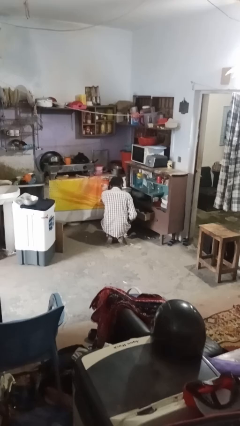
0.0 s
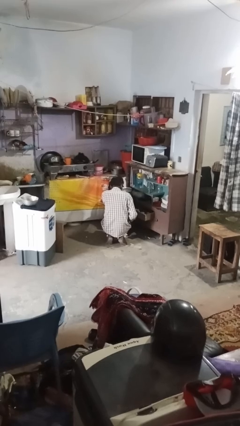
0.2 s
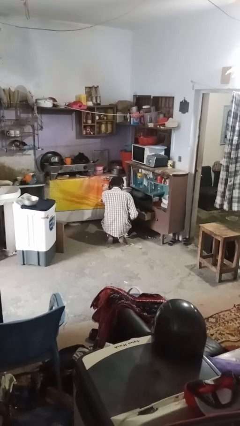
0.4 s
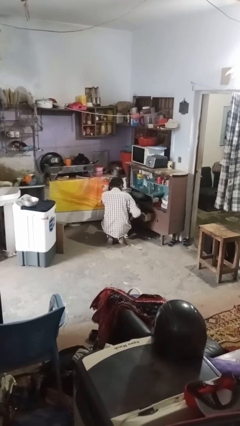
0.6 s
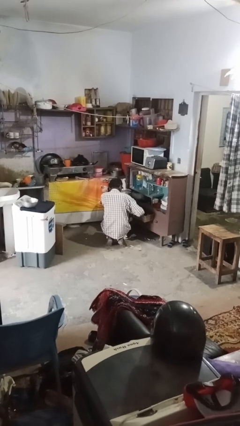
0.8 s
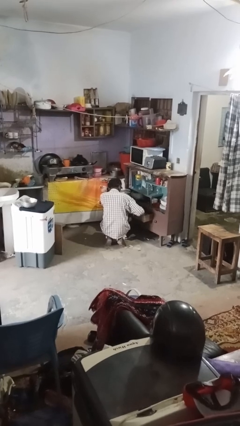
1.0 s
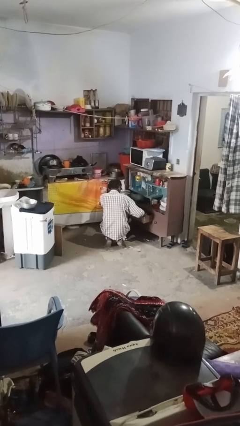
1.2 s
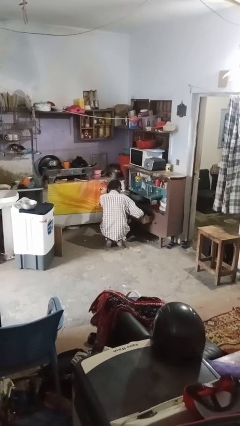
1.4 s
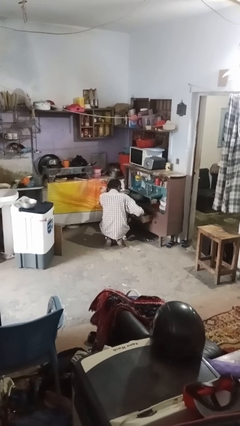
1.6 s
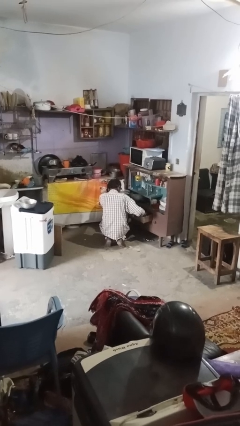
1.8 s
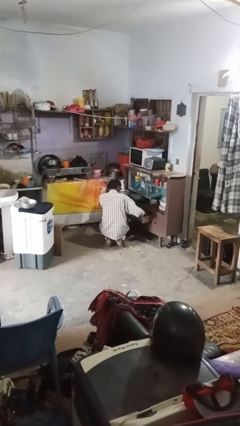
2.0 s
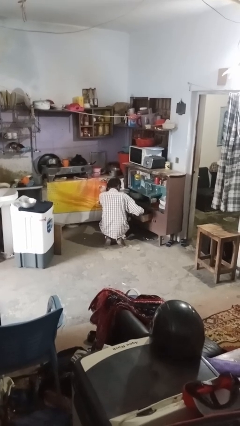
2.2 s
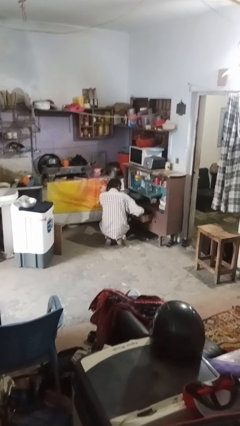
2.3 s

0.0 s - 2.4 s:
person searches in kitchen drawer

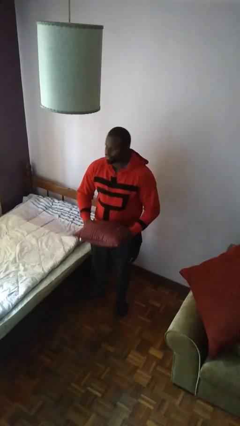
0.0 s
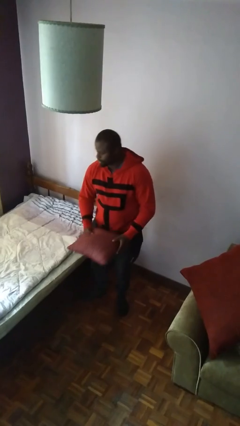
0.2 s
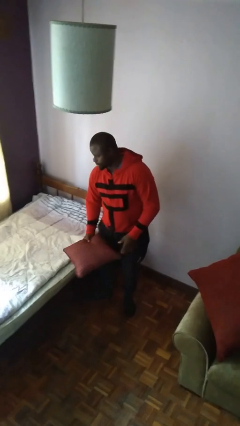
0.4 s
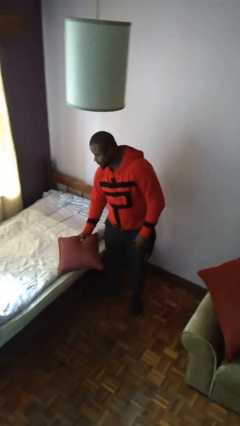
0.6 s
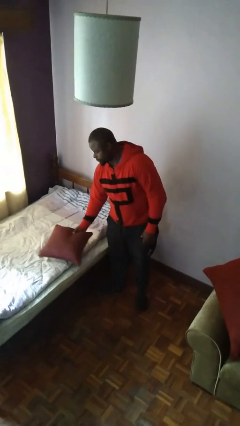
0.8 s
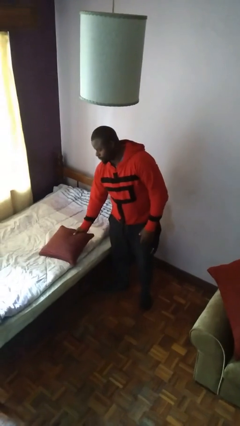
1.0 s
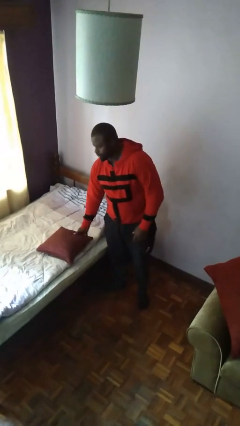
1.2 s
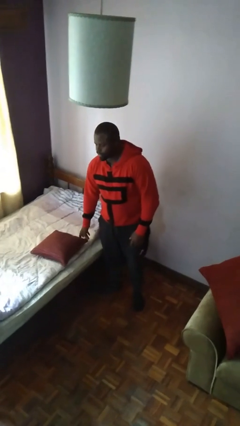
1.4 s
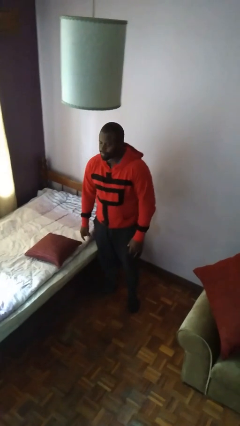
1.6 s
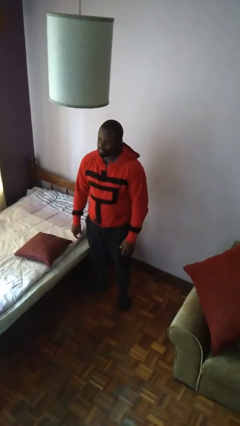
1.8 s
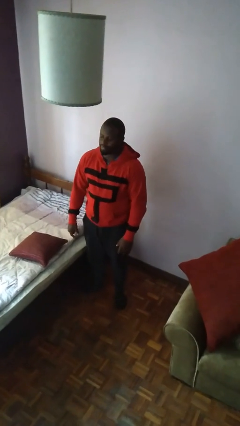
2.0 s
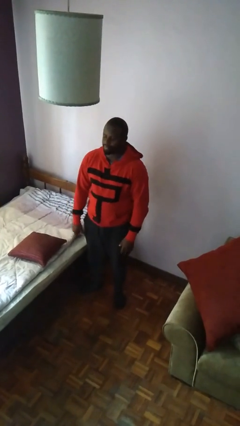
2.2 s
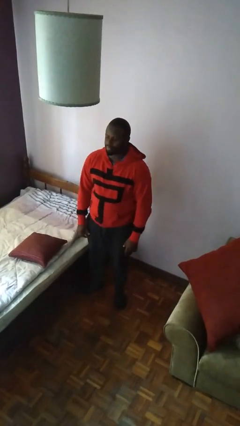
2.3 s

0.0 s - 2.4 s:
person puts down object on bed

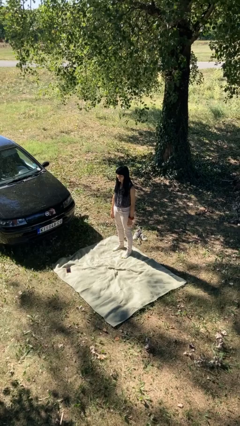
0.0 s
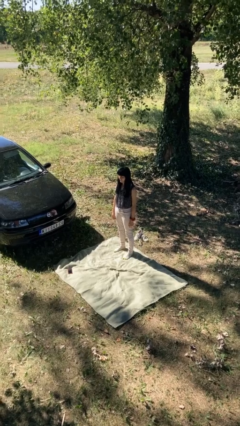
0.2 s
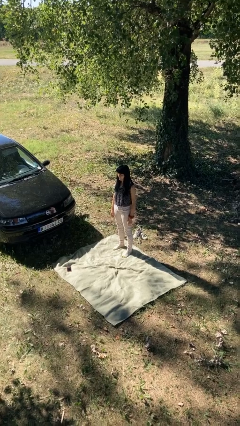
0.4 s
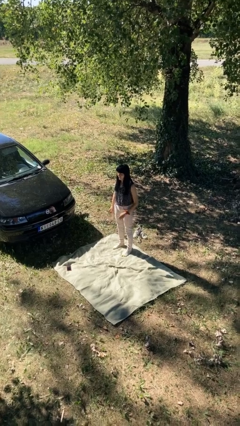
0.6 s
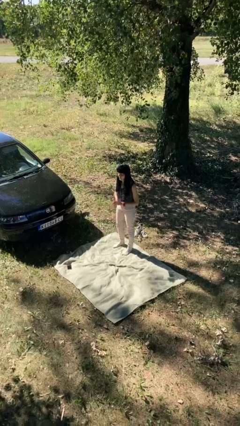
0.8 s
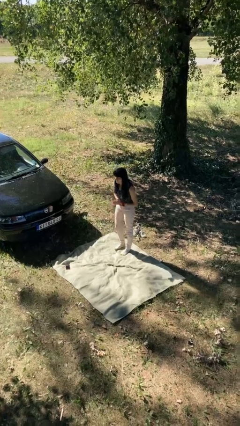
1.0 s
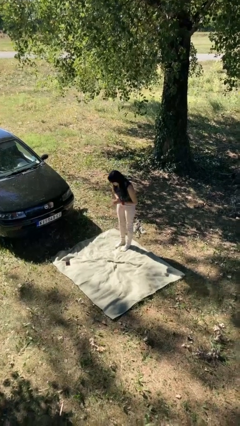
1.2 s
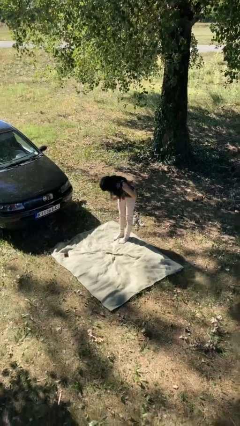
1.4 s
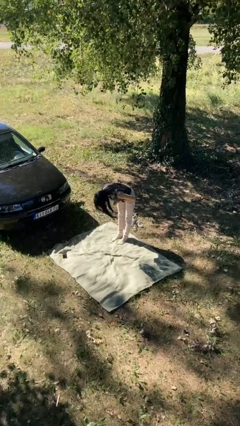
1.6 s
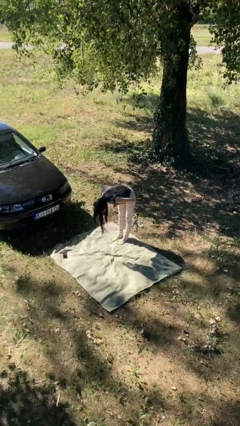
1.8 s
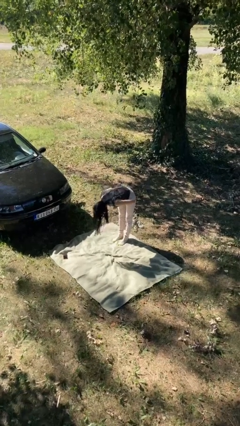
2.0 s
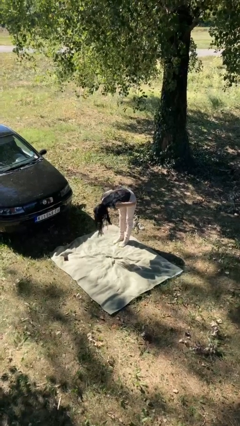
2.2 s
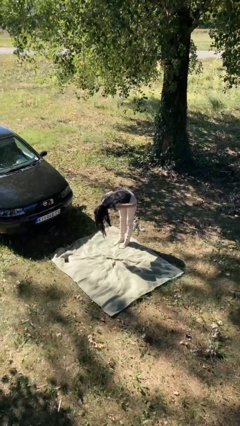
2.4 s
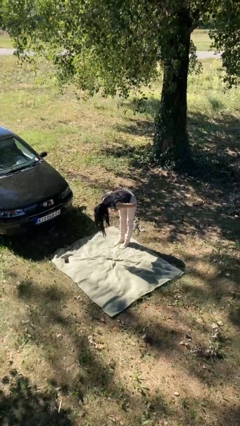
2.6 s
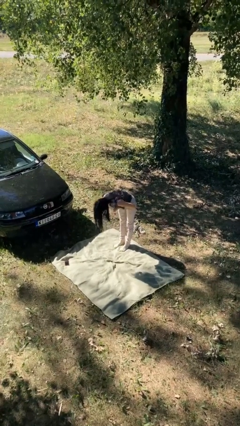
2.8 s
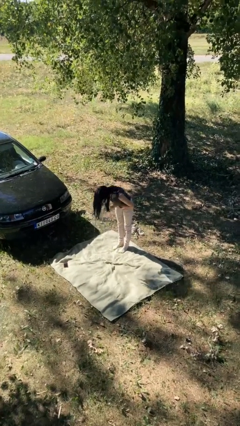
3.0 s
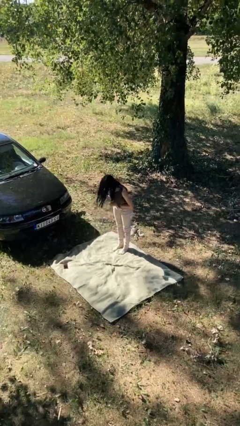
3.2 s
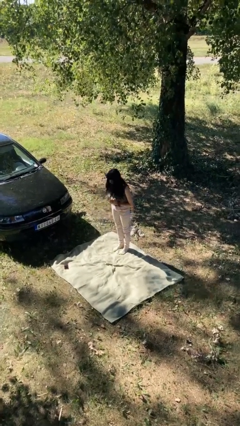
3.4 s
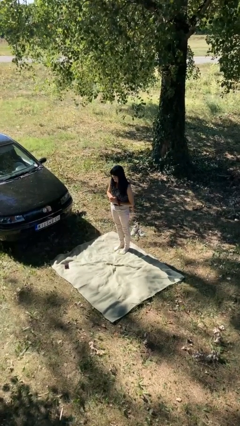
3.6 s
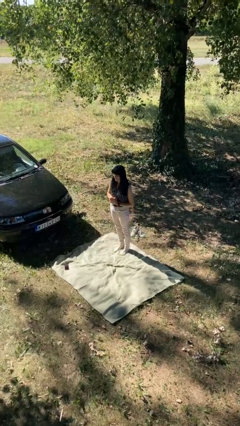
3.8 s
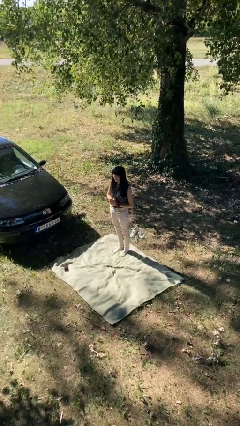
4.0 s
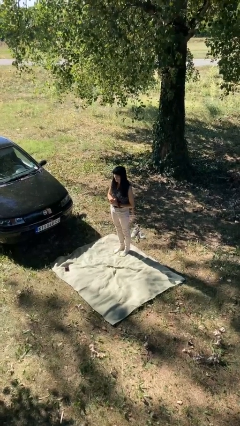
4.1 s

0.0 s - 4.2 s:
person bows

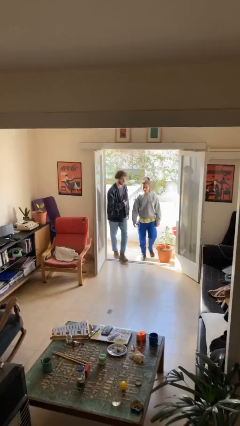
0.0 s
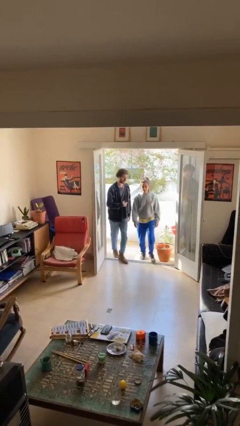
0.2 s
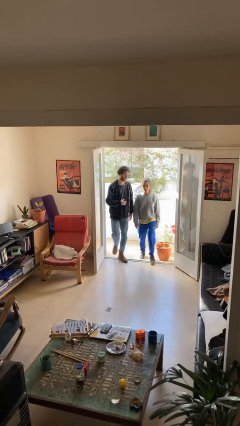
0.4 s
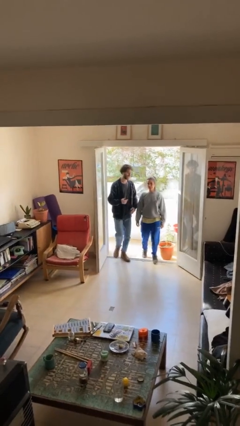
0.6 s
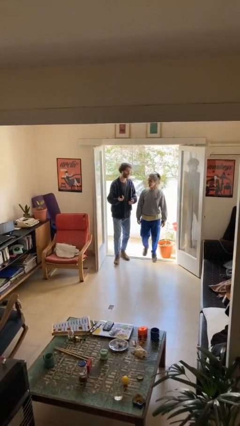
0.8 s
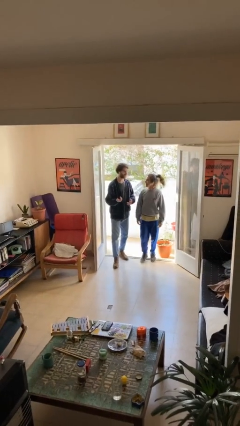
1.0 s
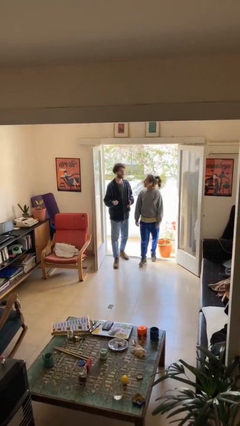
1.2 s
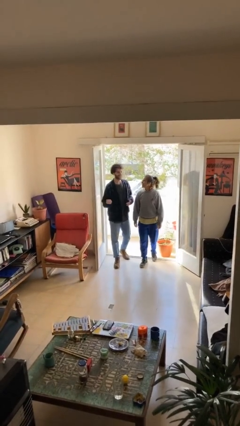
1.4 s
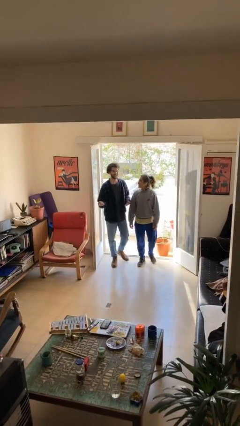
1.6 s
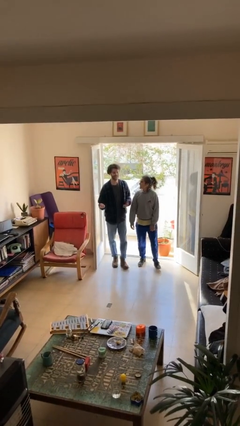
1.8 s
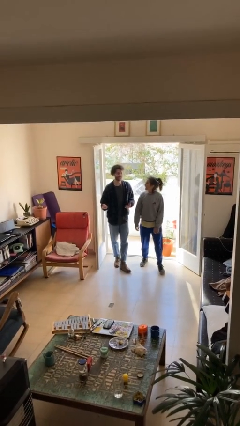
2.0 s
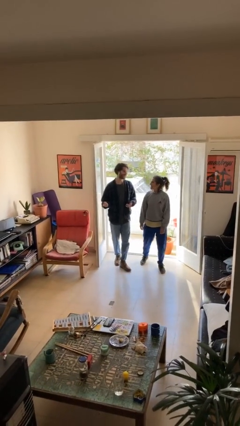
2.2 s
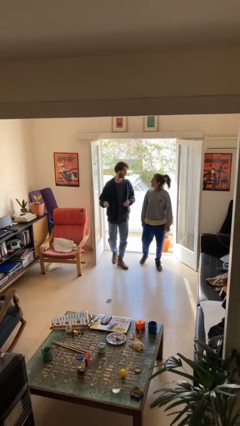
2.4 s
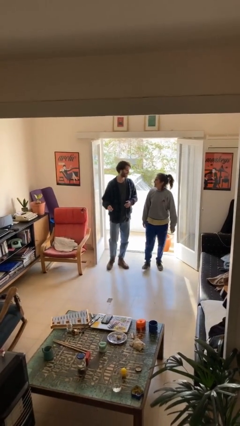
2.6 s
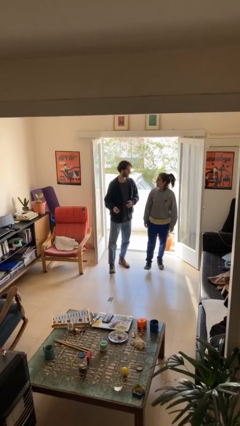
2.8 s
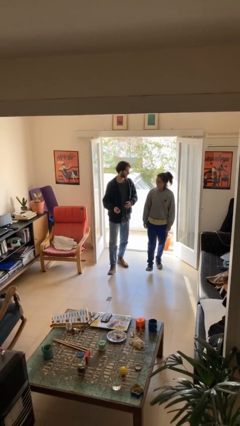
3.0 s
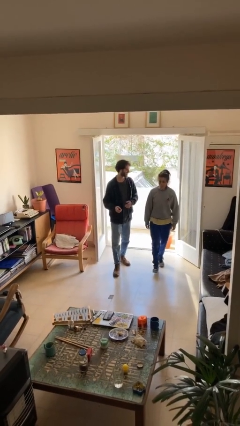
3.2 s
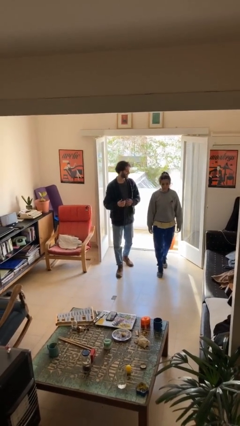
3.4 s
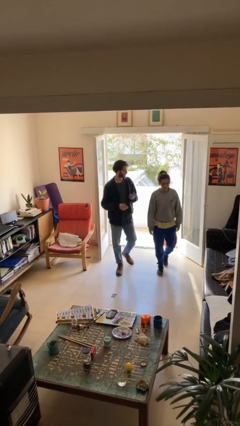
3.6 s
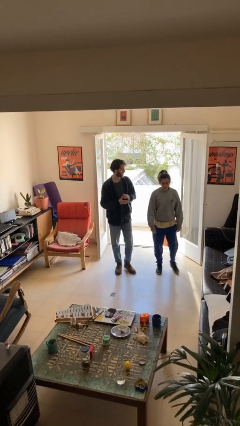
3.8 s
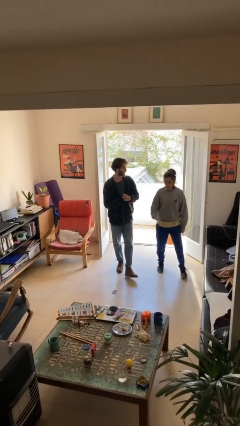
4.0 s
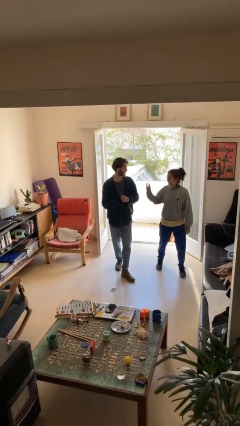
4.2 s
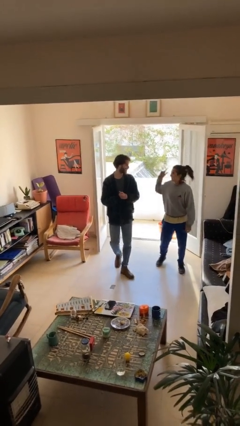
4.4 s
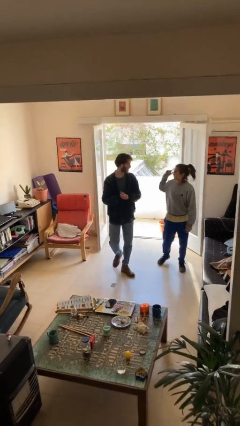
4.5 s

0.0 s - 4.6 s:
person talks to person

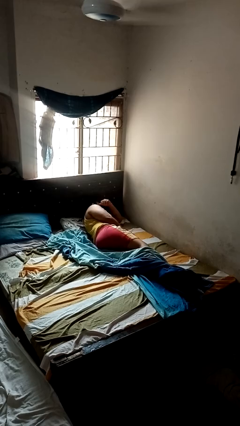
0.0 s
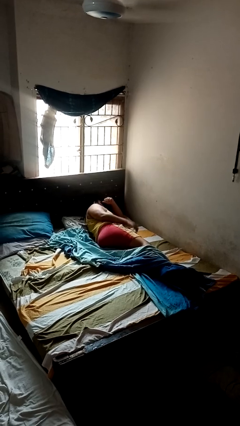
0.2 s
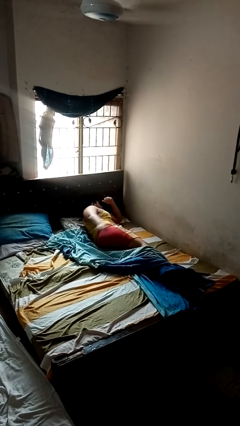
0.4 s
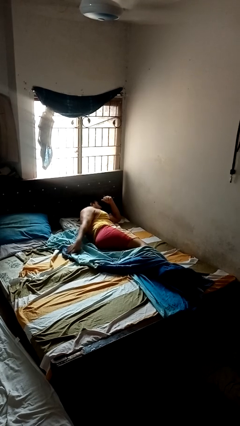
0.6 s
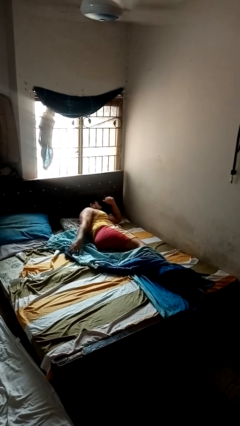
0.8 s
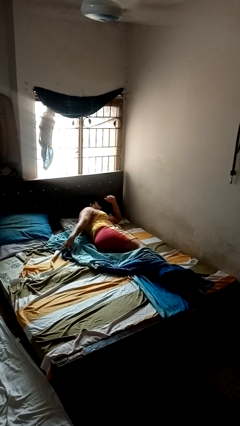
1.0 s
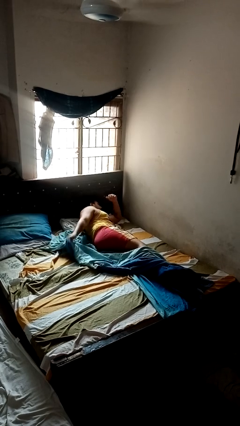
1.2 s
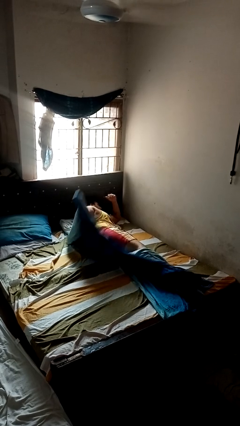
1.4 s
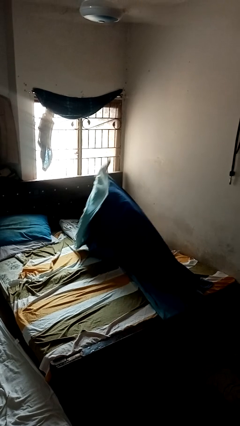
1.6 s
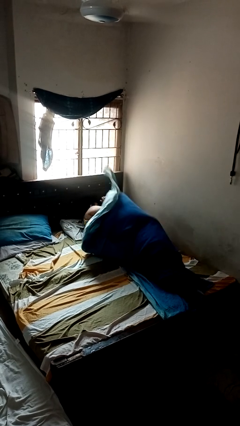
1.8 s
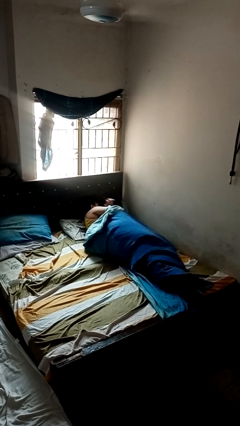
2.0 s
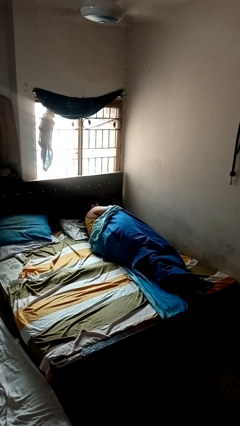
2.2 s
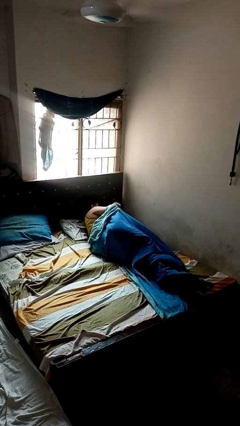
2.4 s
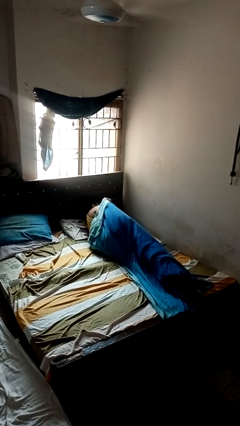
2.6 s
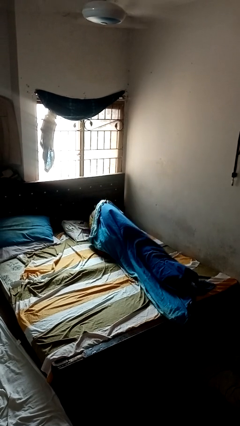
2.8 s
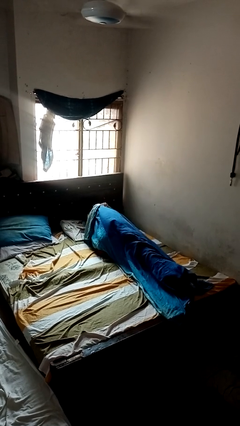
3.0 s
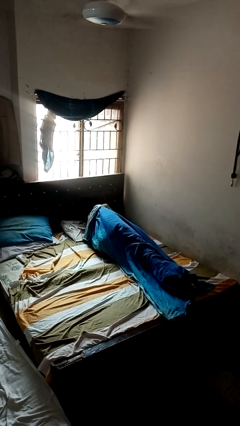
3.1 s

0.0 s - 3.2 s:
person covers with blanket

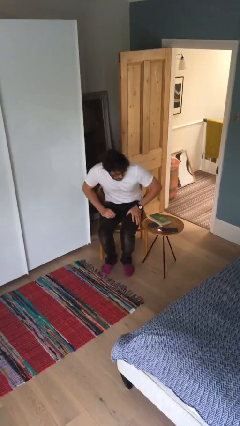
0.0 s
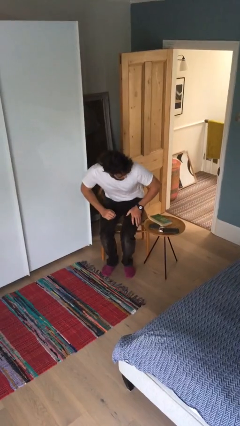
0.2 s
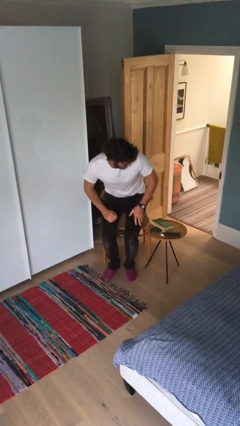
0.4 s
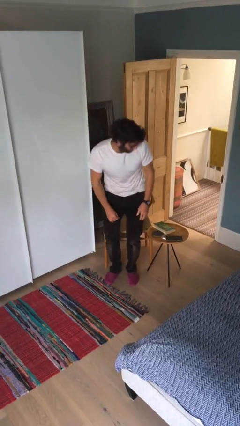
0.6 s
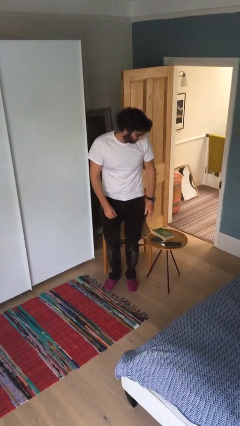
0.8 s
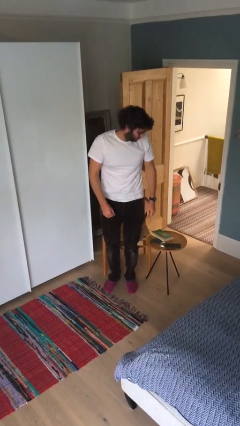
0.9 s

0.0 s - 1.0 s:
person stands up
